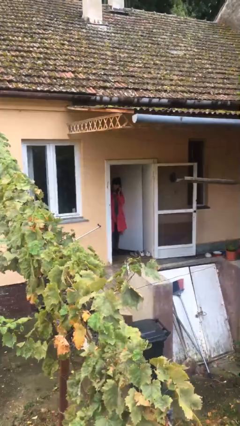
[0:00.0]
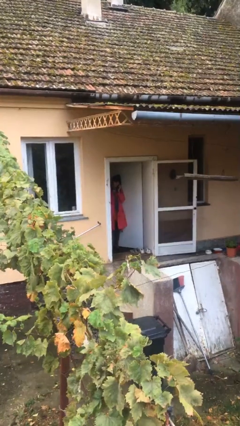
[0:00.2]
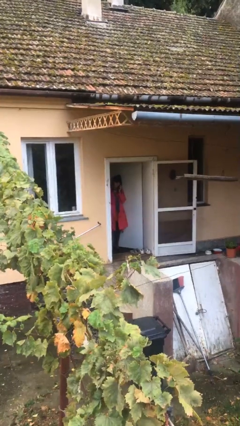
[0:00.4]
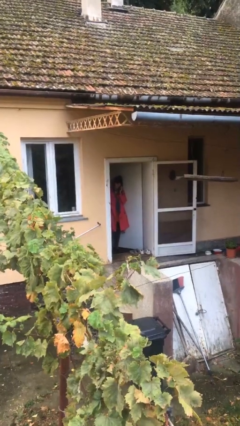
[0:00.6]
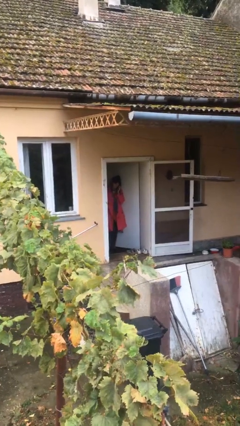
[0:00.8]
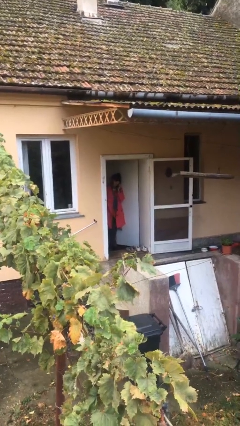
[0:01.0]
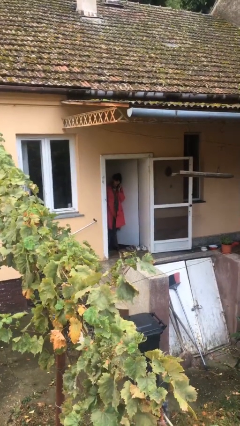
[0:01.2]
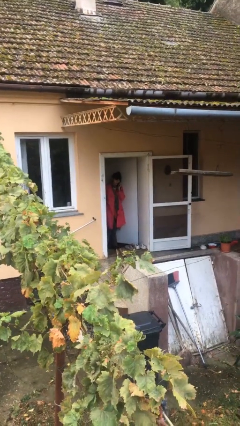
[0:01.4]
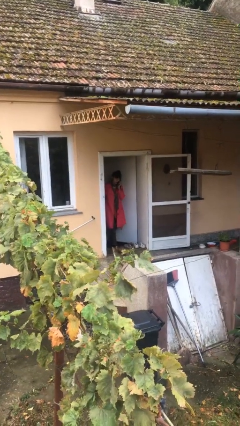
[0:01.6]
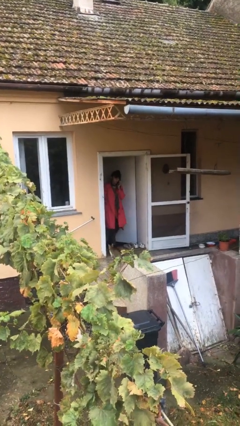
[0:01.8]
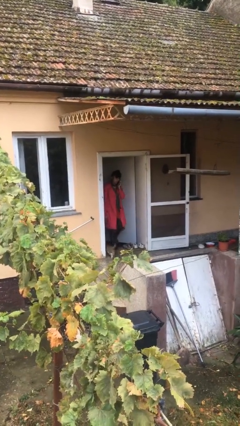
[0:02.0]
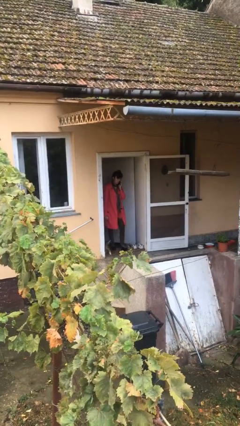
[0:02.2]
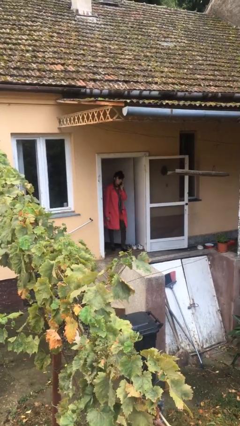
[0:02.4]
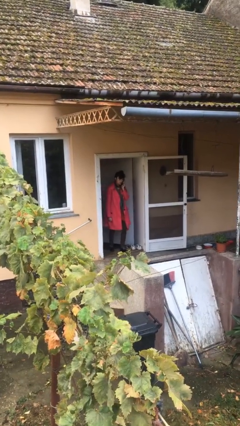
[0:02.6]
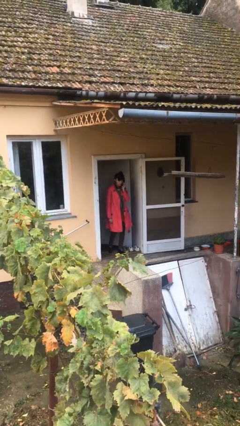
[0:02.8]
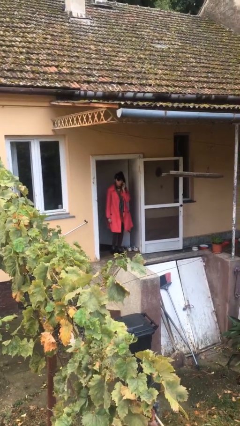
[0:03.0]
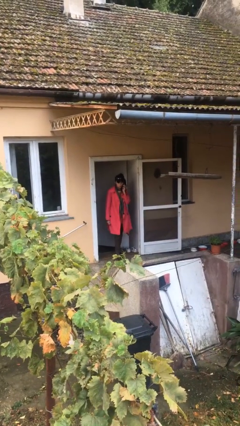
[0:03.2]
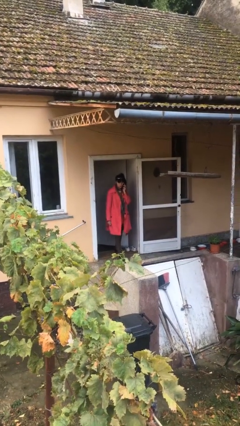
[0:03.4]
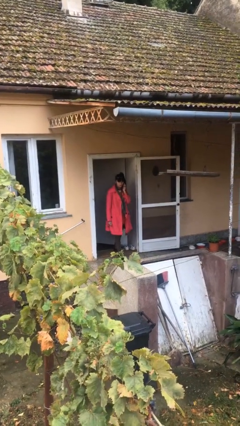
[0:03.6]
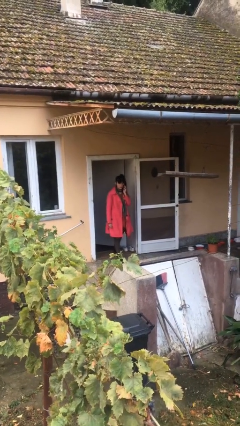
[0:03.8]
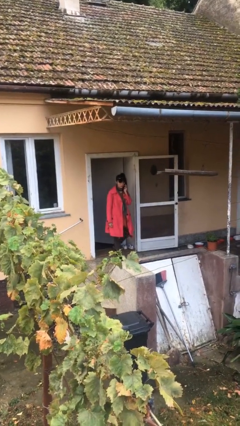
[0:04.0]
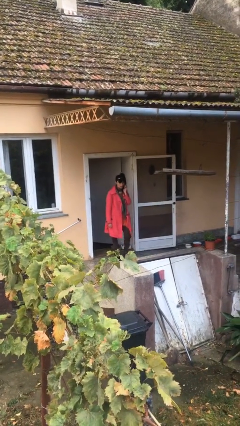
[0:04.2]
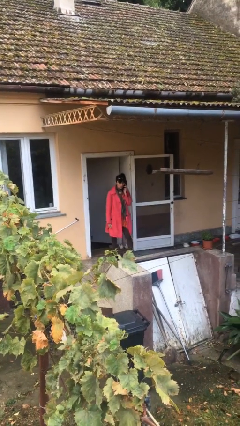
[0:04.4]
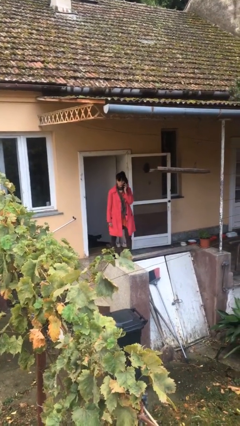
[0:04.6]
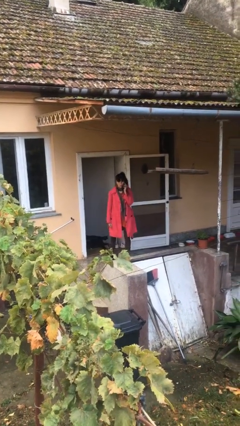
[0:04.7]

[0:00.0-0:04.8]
person enters scene through structure

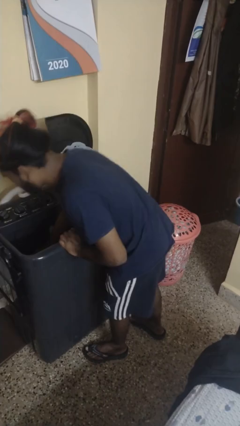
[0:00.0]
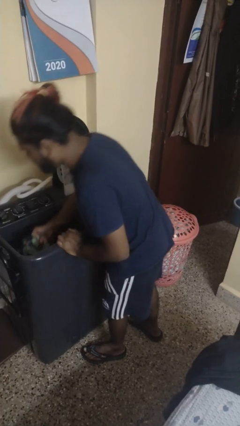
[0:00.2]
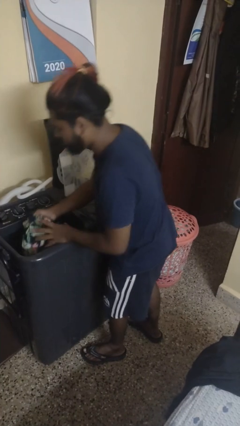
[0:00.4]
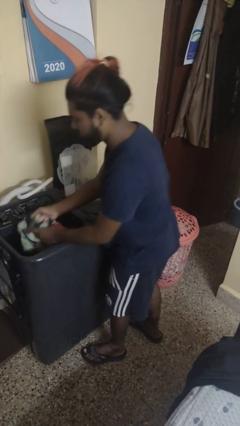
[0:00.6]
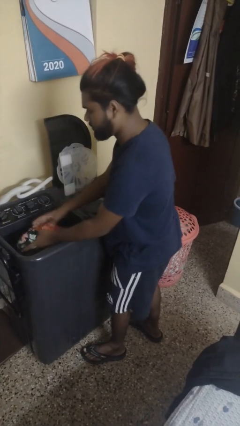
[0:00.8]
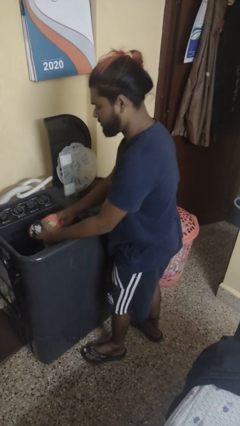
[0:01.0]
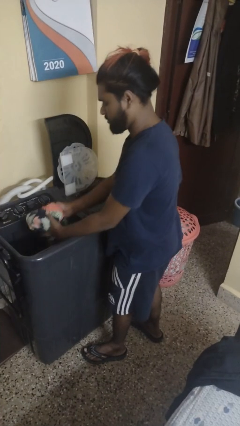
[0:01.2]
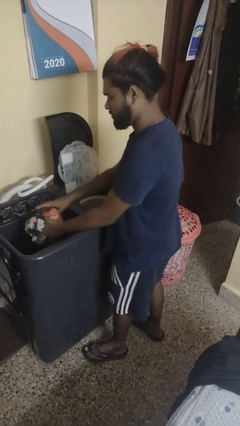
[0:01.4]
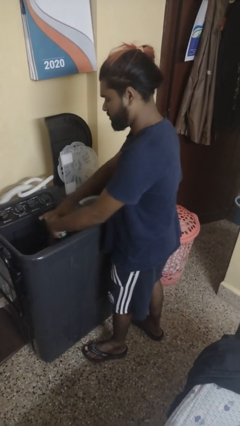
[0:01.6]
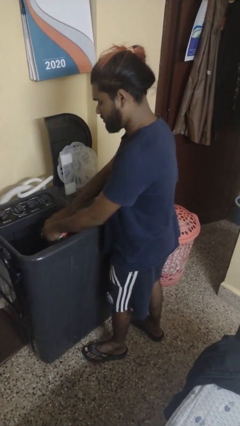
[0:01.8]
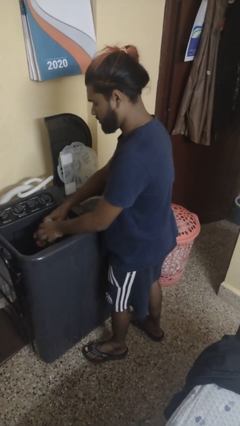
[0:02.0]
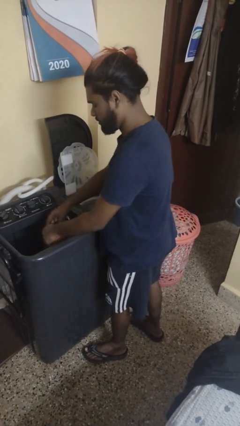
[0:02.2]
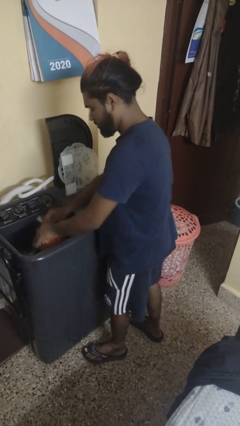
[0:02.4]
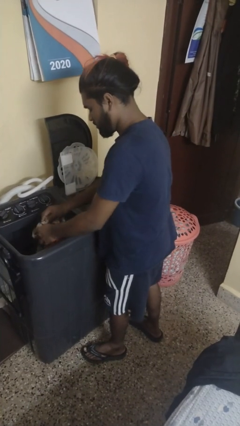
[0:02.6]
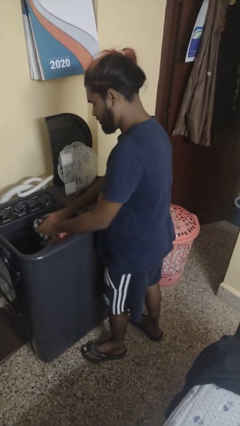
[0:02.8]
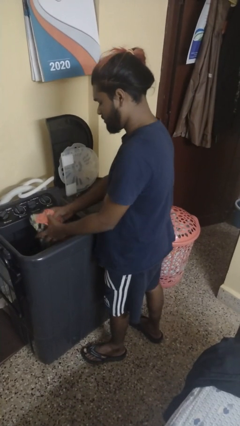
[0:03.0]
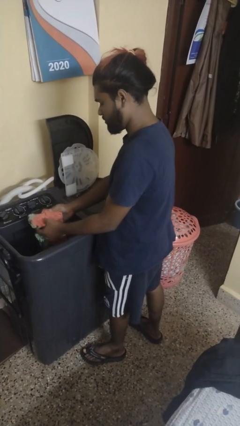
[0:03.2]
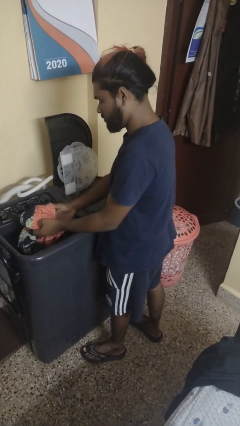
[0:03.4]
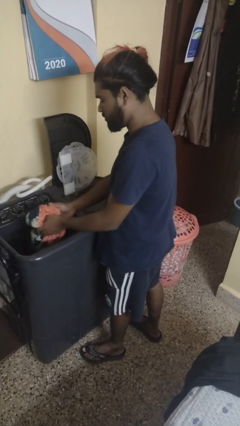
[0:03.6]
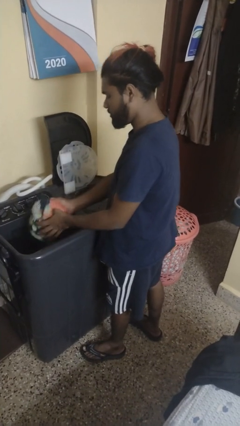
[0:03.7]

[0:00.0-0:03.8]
person unloads clotheswasher

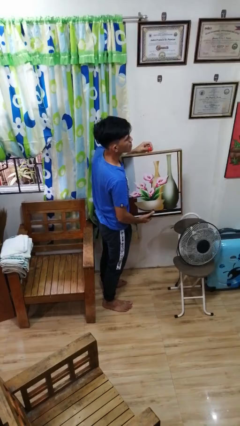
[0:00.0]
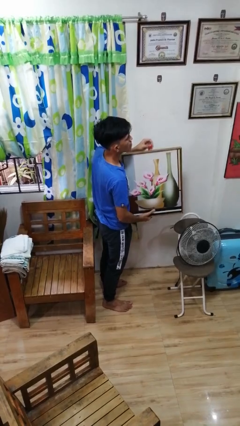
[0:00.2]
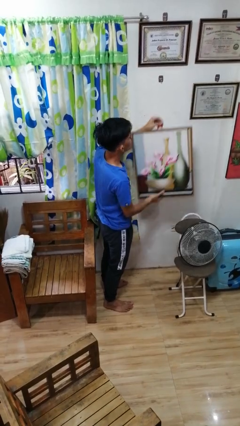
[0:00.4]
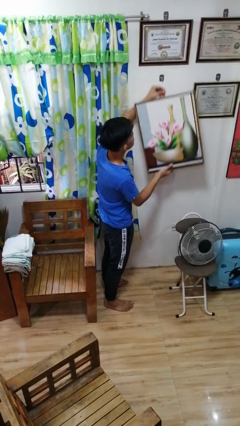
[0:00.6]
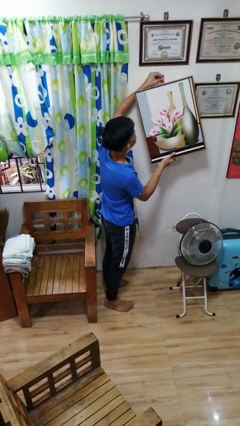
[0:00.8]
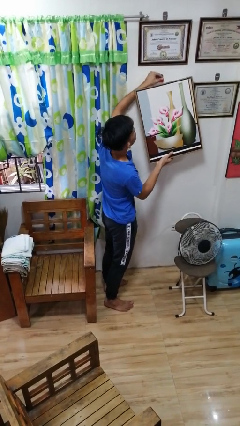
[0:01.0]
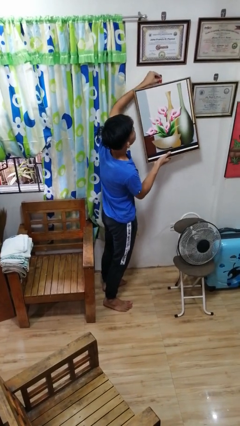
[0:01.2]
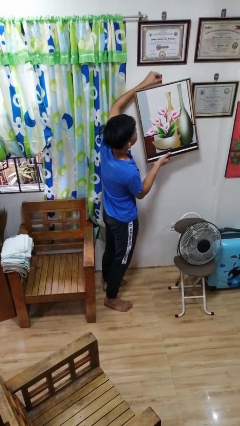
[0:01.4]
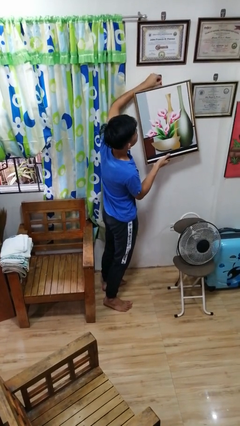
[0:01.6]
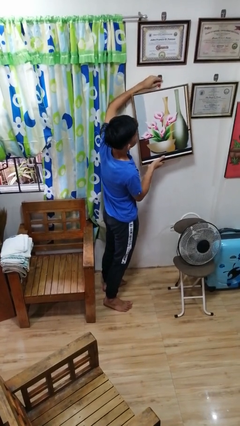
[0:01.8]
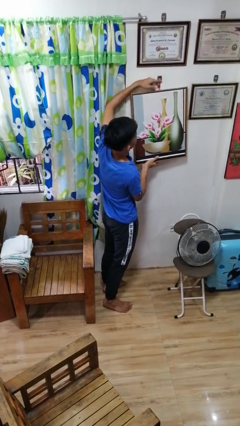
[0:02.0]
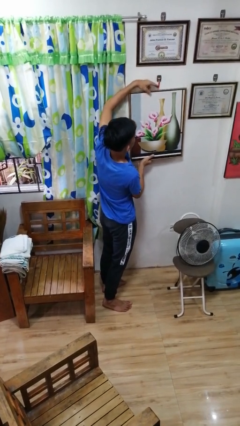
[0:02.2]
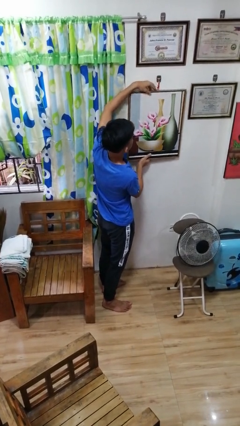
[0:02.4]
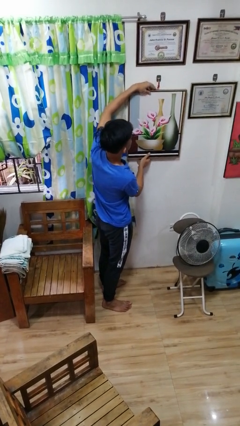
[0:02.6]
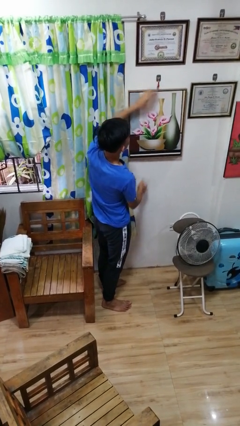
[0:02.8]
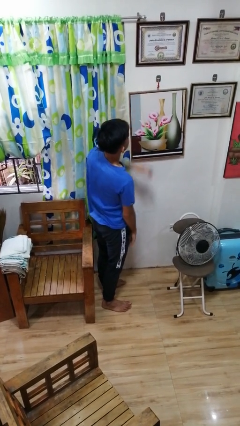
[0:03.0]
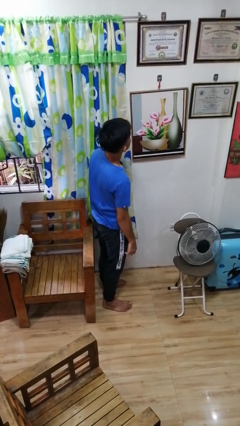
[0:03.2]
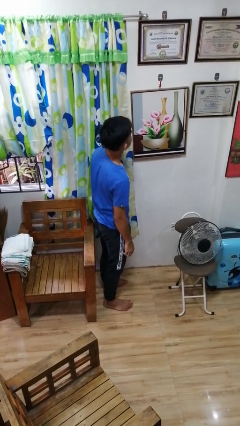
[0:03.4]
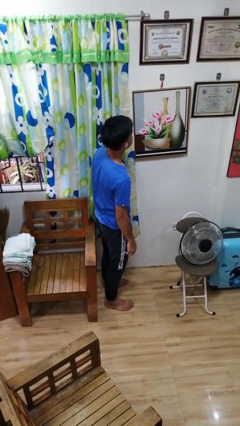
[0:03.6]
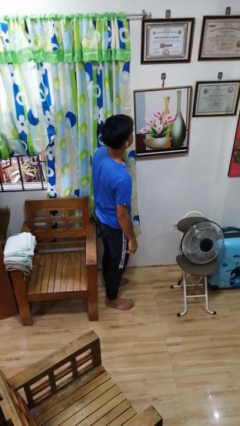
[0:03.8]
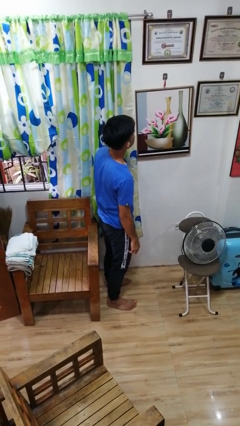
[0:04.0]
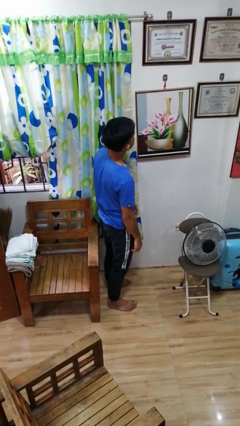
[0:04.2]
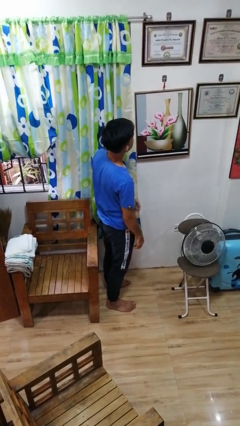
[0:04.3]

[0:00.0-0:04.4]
person puts up picture frame

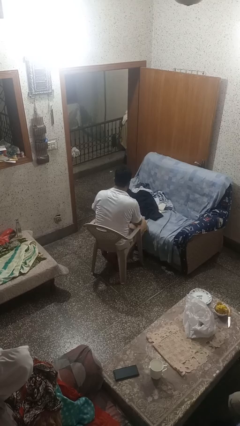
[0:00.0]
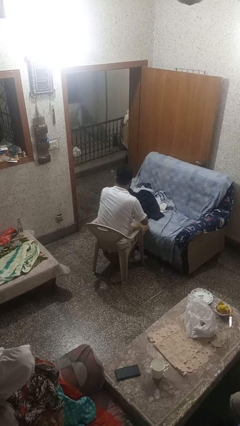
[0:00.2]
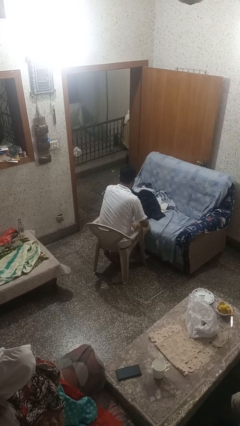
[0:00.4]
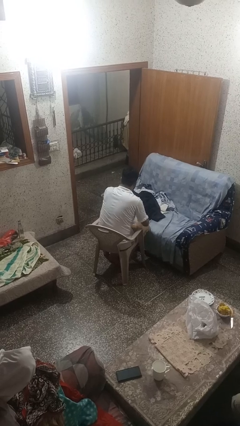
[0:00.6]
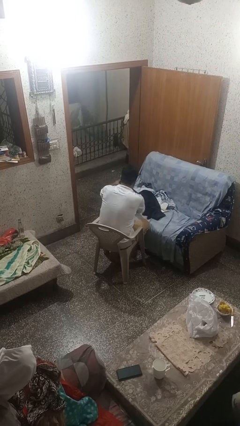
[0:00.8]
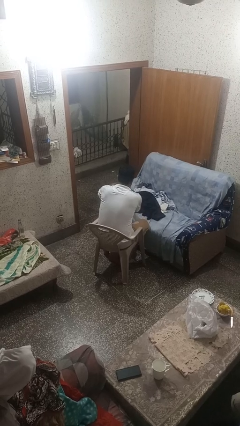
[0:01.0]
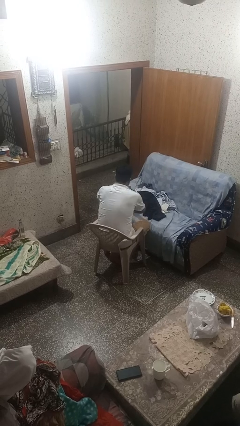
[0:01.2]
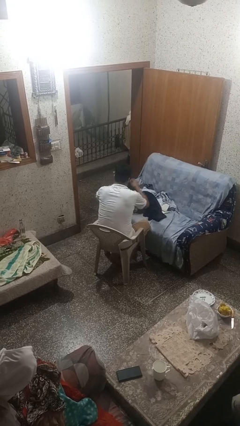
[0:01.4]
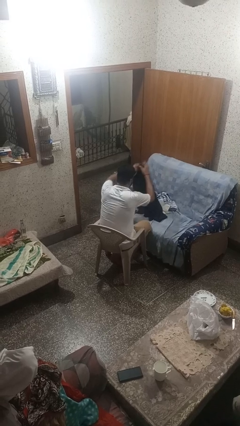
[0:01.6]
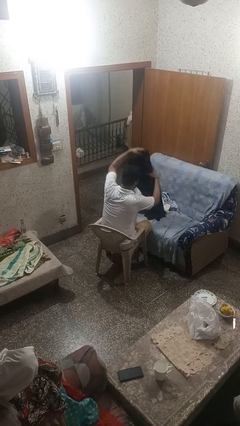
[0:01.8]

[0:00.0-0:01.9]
person folds pants

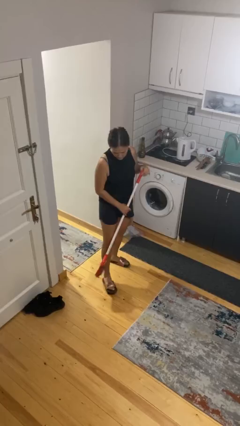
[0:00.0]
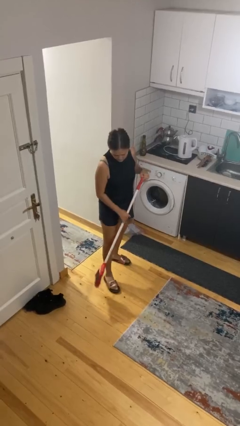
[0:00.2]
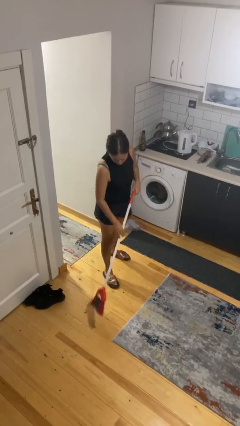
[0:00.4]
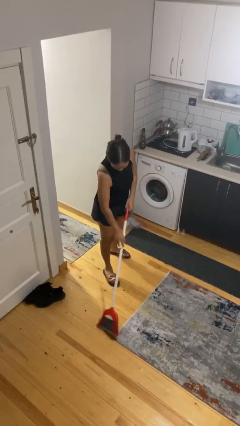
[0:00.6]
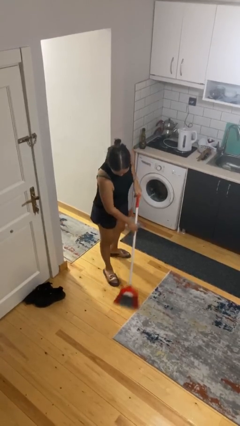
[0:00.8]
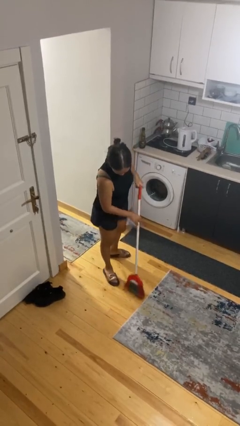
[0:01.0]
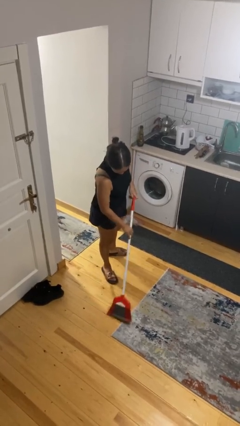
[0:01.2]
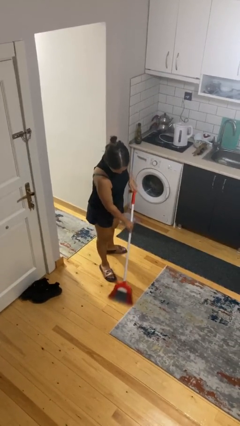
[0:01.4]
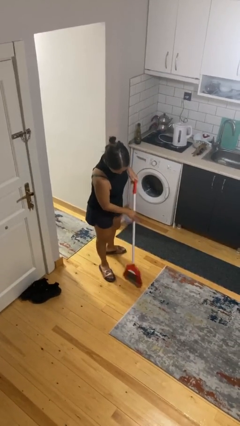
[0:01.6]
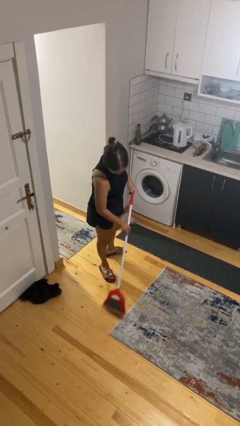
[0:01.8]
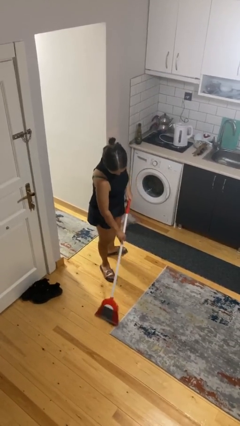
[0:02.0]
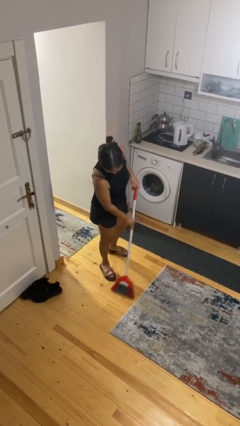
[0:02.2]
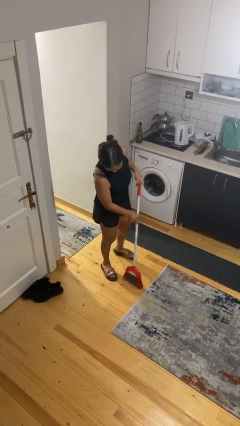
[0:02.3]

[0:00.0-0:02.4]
person sweeps floor

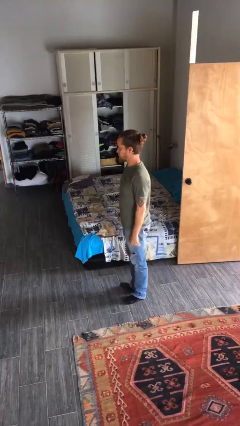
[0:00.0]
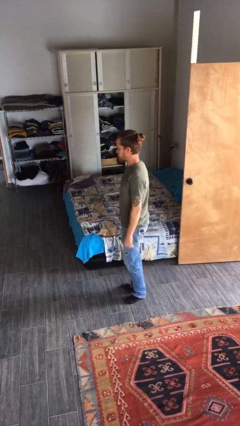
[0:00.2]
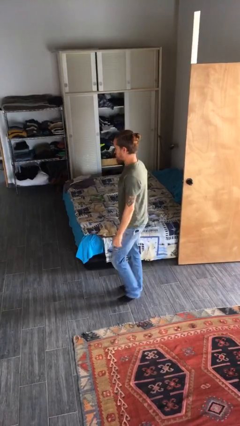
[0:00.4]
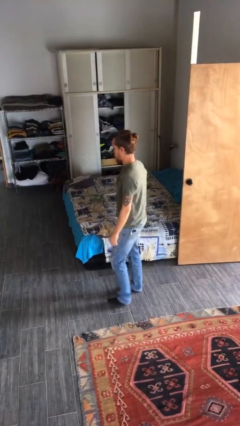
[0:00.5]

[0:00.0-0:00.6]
person exercises with jumping jacks
